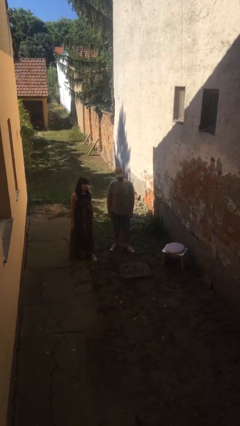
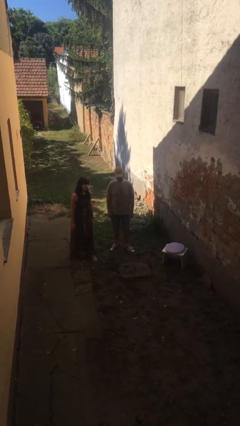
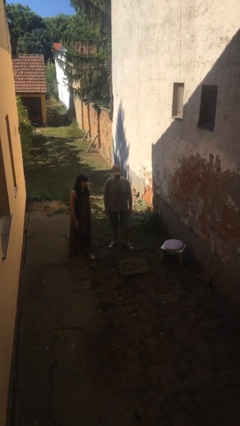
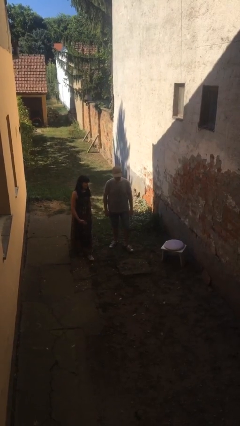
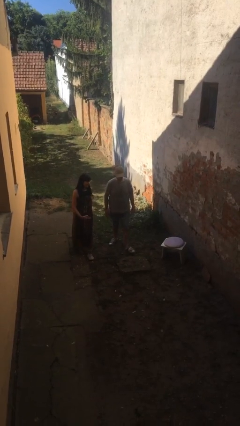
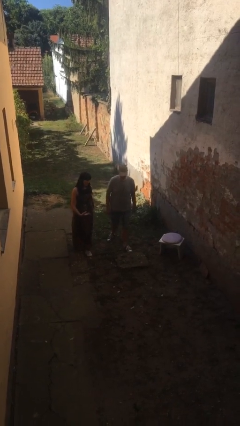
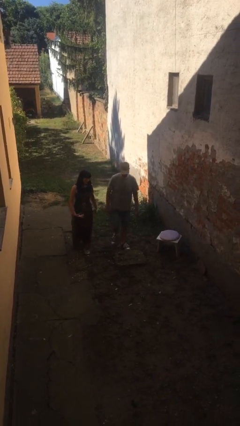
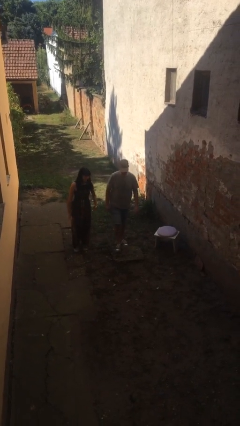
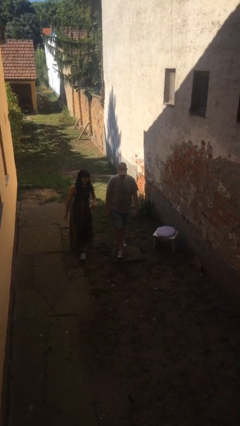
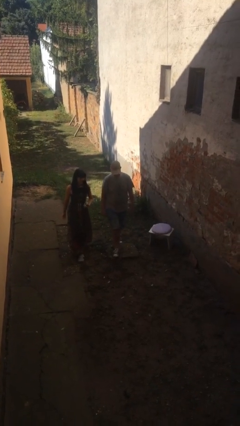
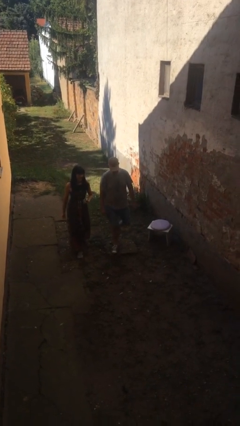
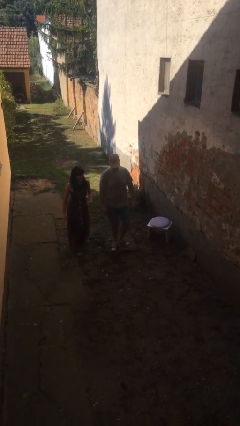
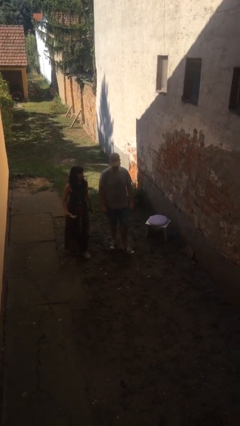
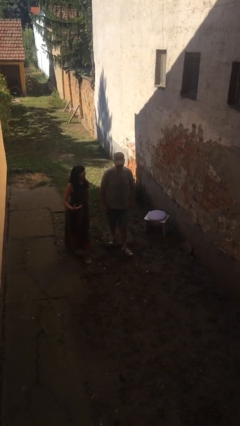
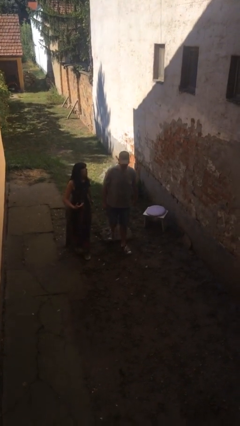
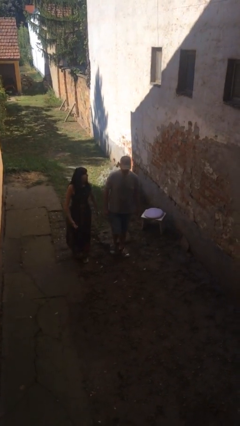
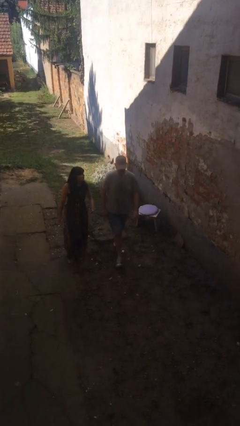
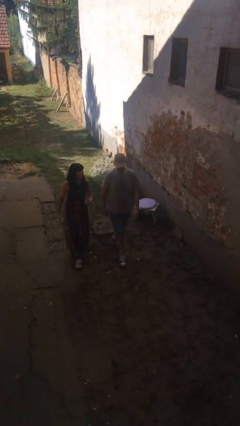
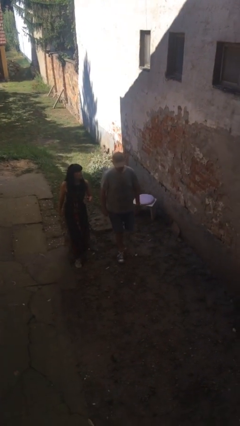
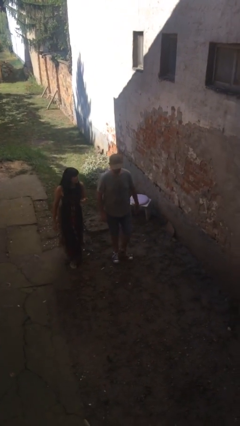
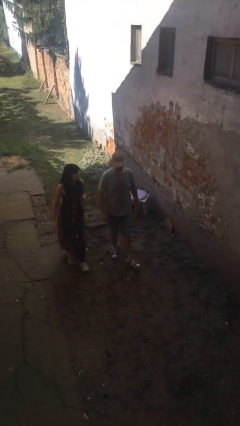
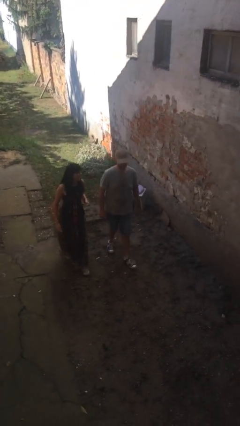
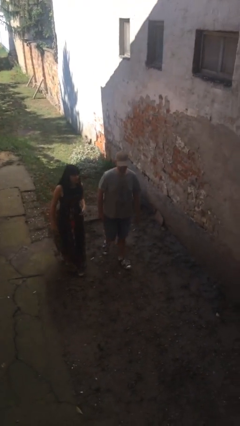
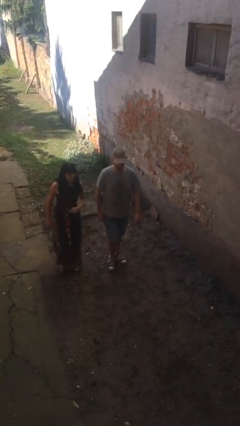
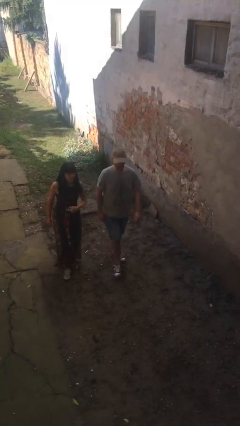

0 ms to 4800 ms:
person talks to person

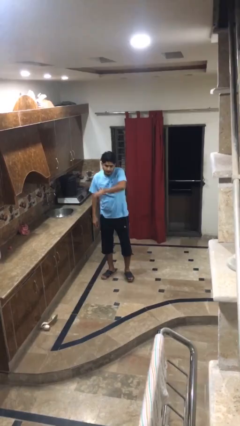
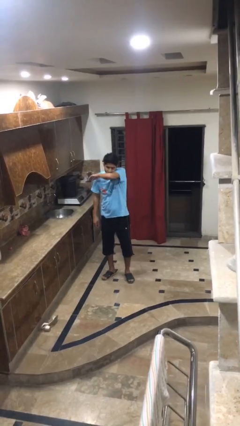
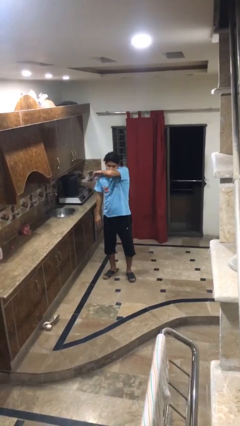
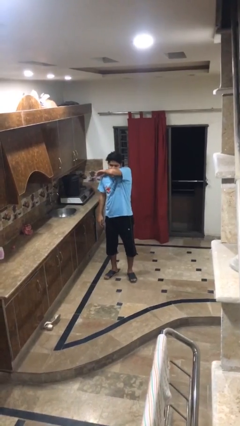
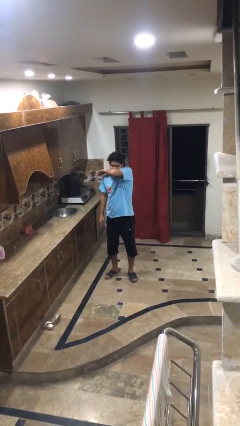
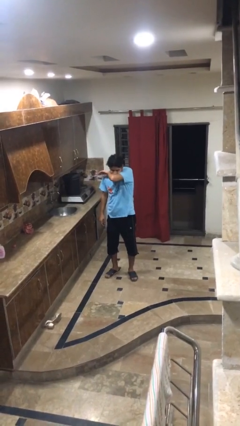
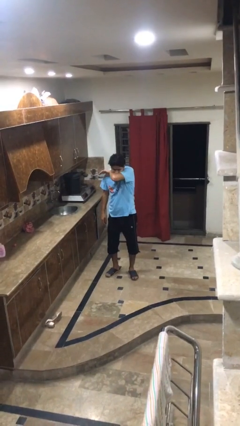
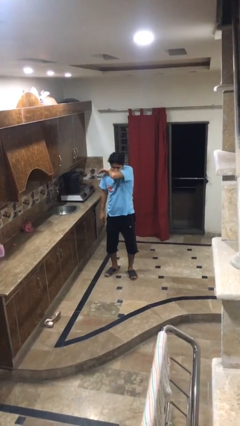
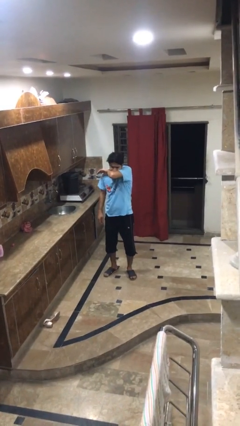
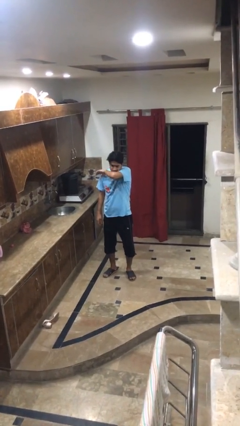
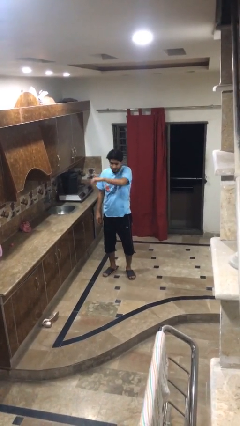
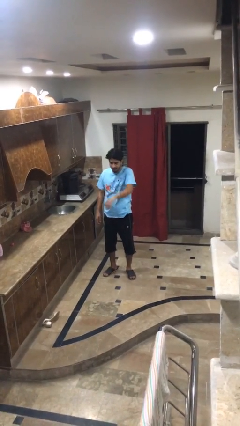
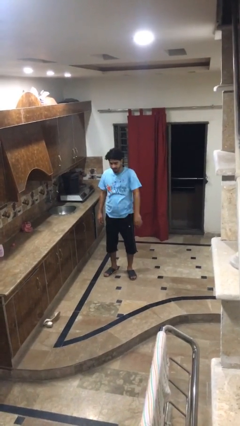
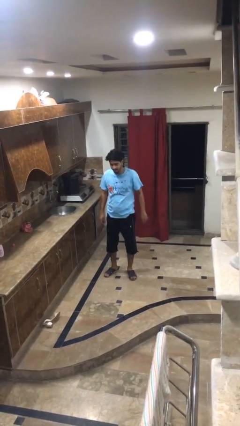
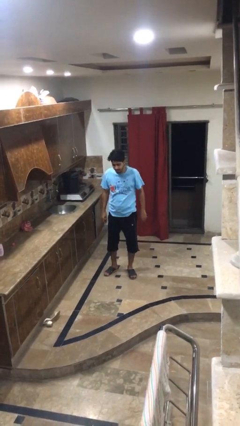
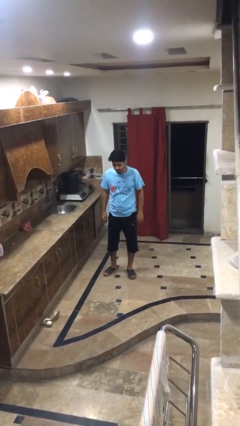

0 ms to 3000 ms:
person sneezes into arm

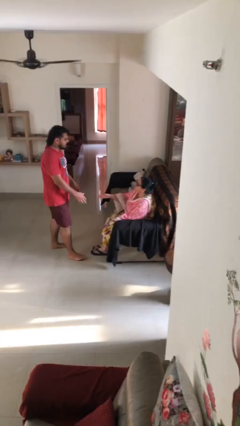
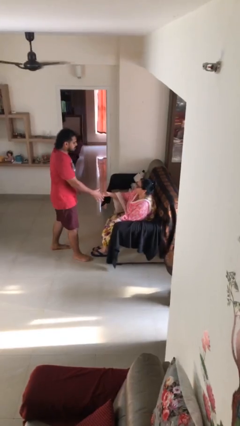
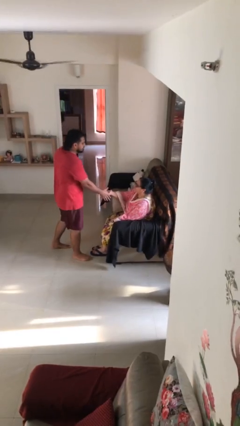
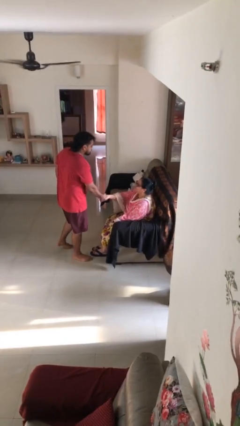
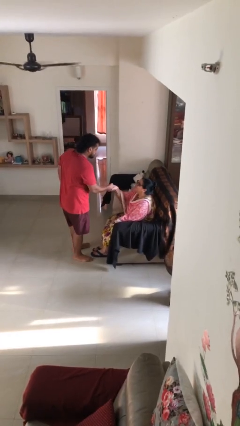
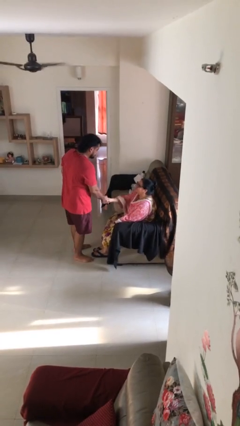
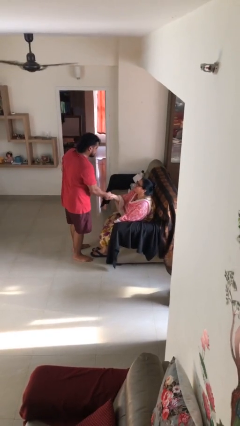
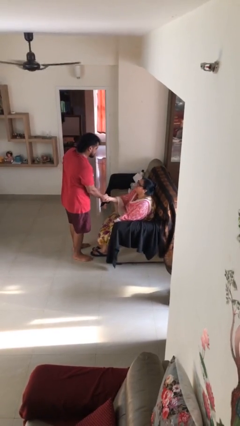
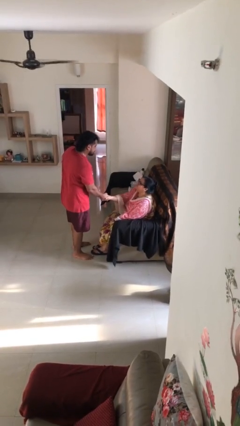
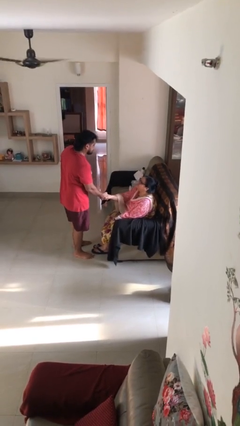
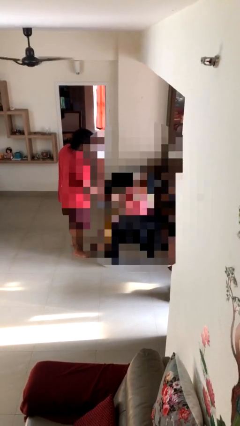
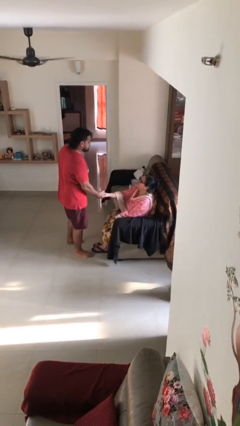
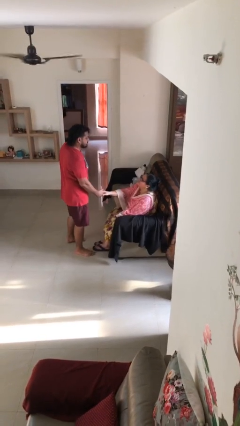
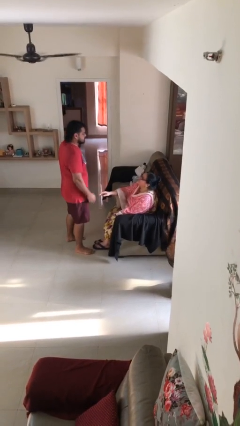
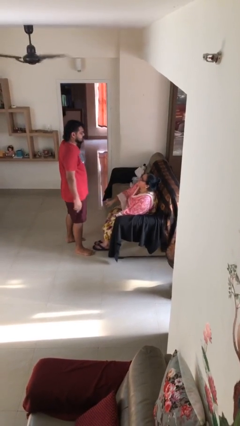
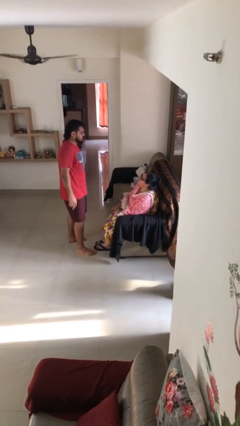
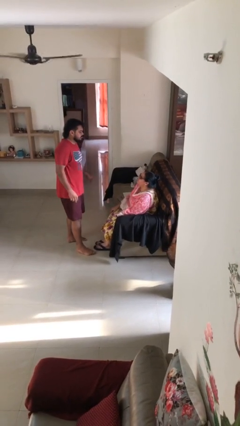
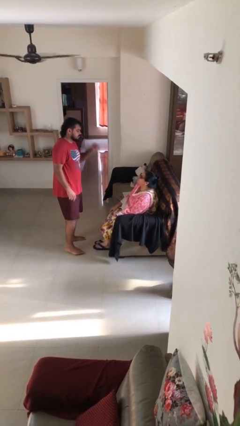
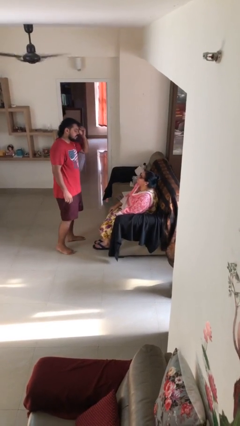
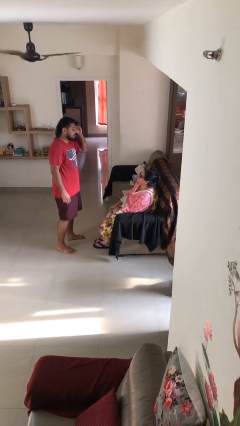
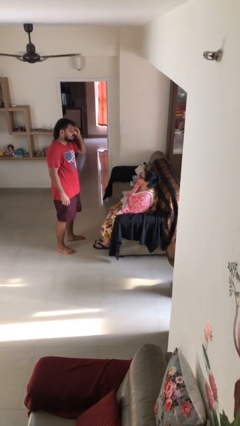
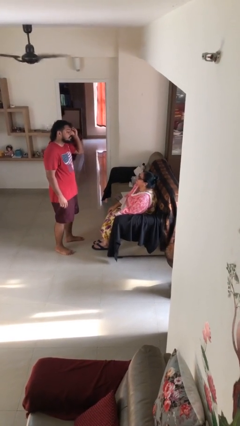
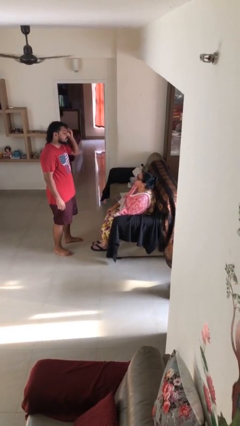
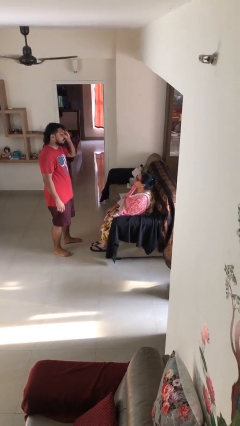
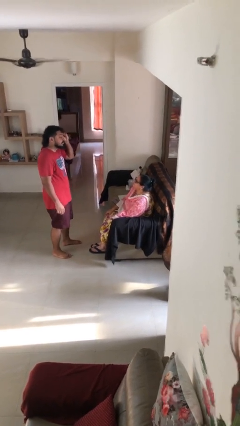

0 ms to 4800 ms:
person shakes hand

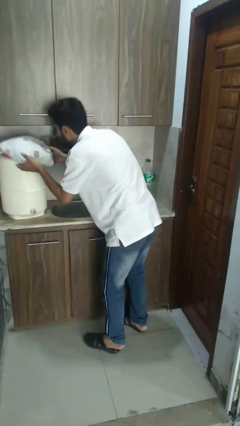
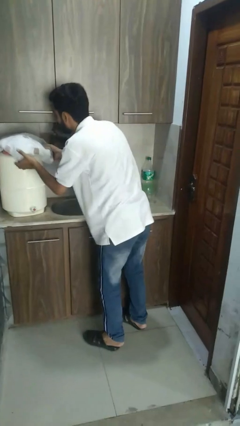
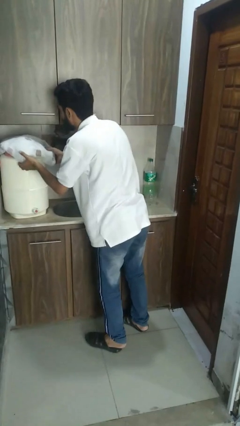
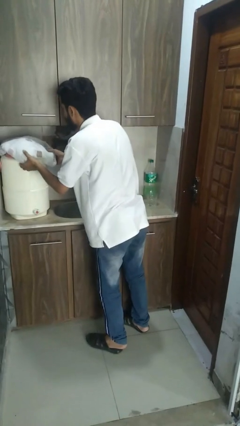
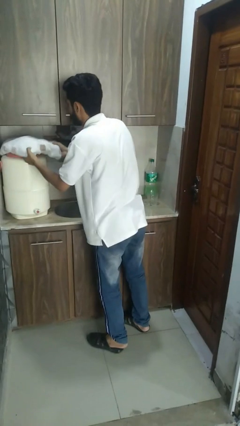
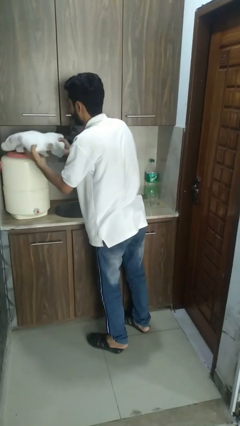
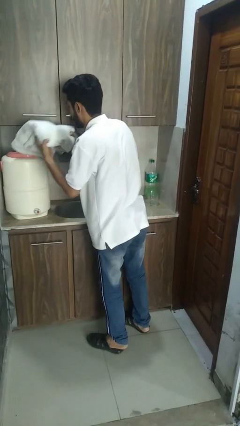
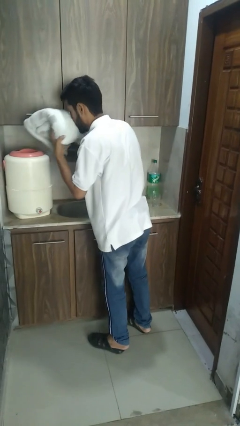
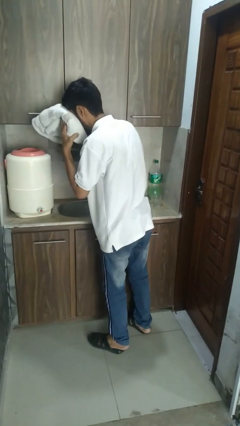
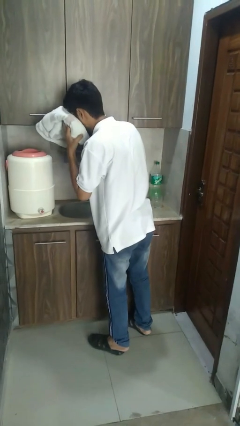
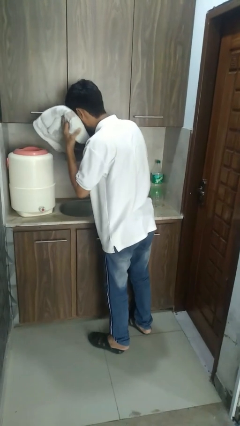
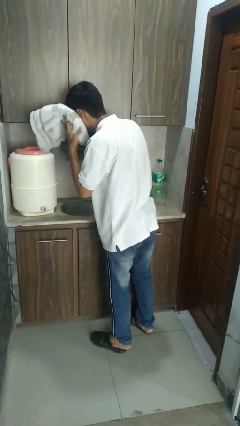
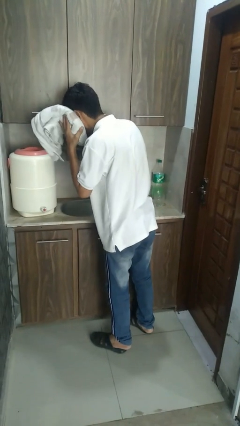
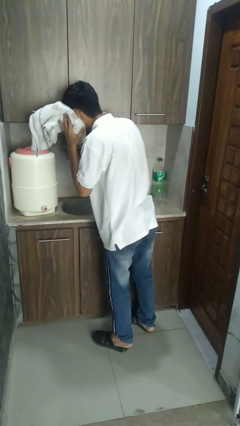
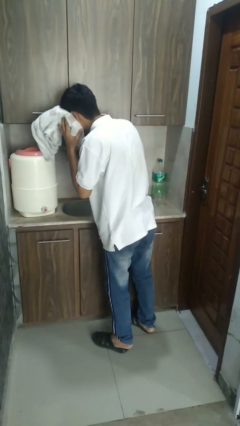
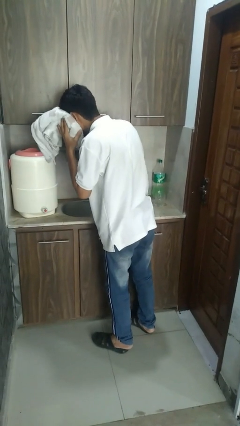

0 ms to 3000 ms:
person dries face with towel

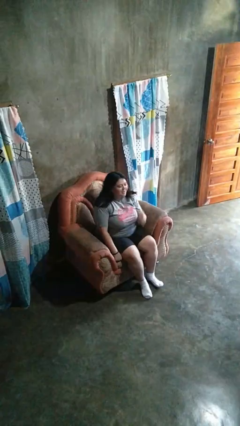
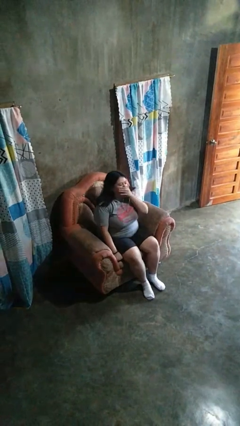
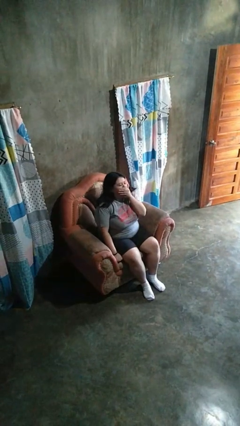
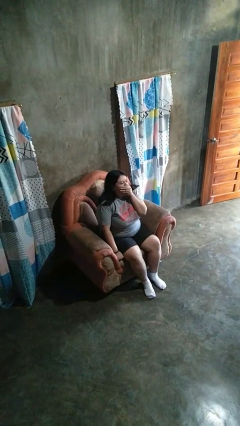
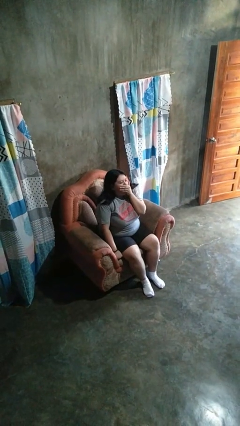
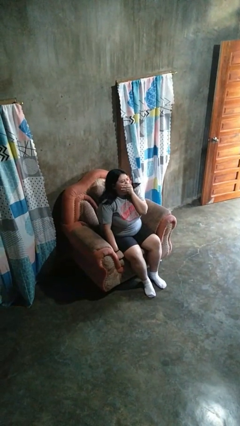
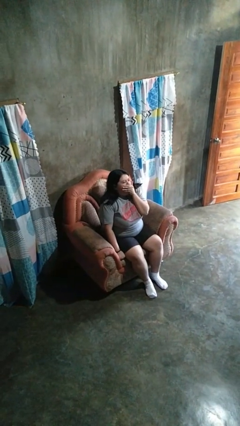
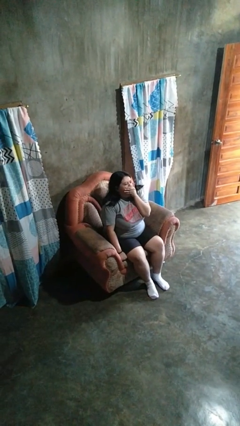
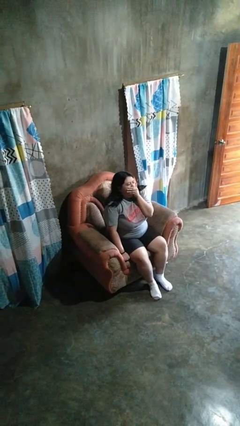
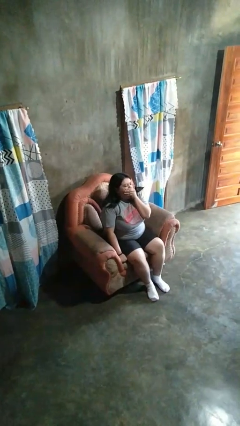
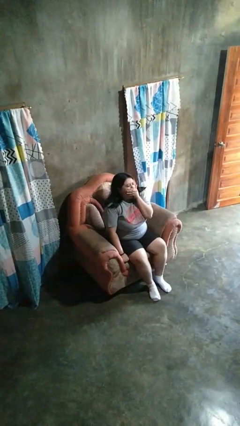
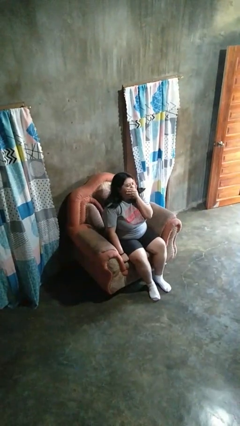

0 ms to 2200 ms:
person yawns
